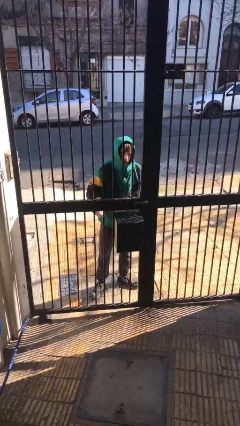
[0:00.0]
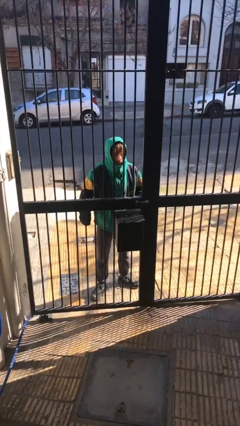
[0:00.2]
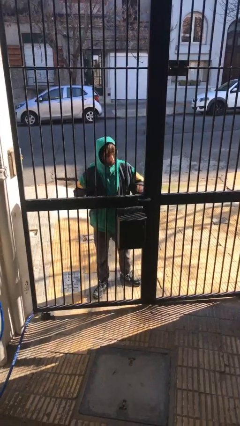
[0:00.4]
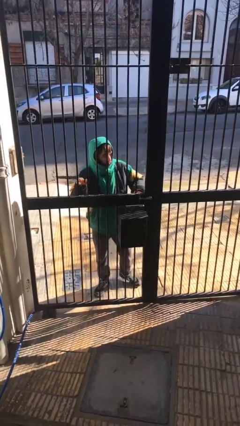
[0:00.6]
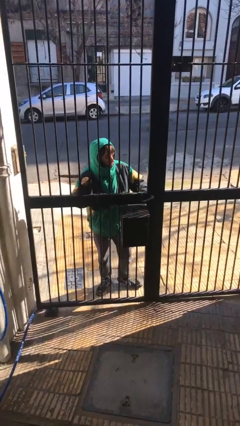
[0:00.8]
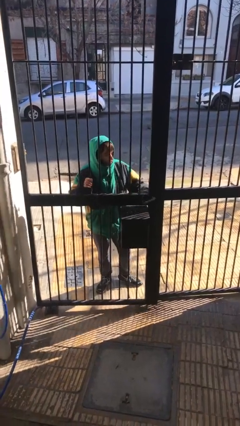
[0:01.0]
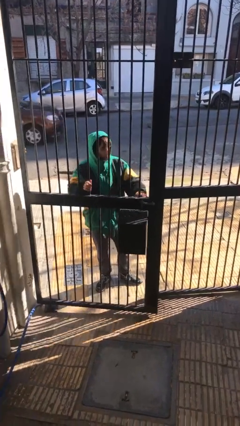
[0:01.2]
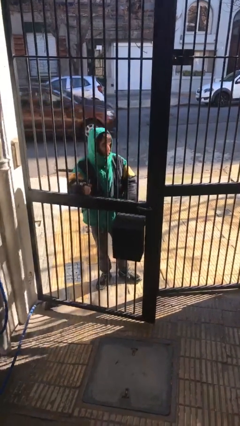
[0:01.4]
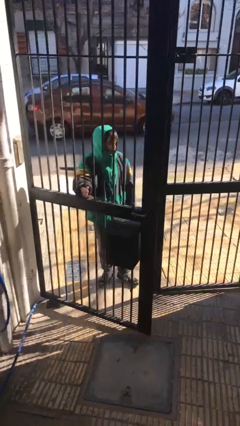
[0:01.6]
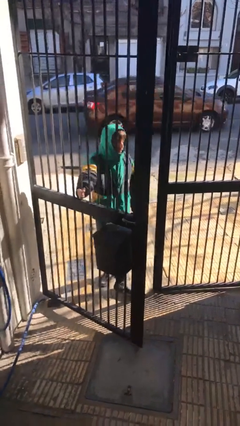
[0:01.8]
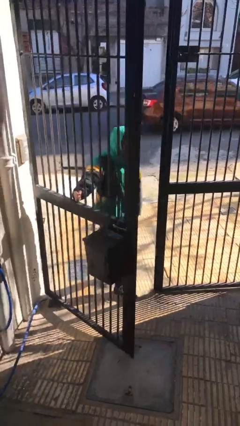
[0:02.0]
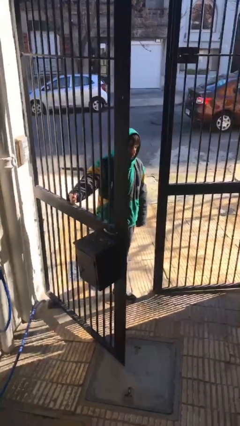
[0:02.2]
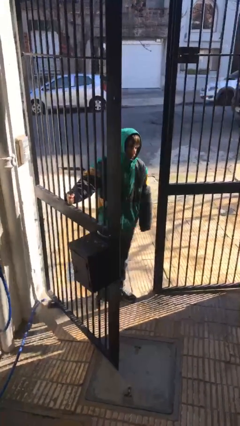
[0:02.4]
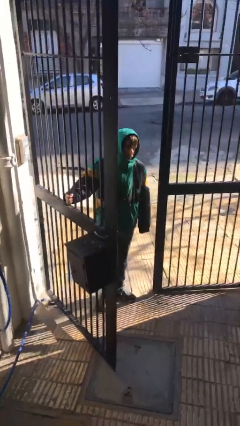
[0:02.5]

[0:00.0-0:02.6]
person opens gate

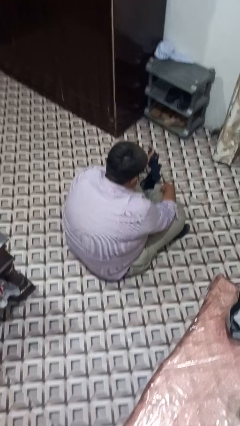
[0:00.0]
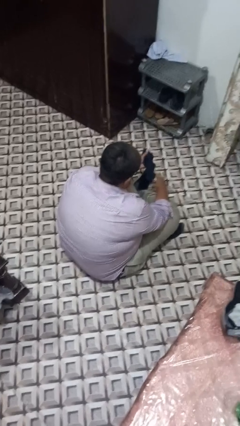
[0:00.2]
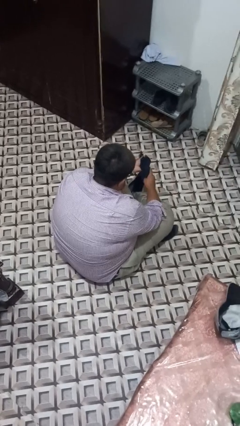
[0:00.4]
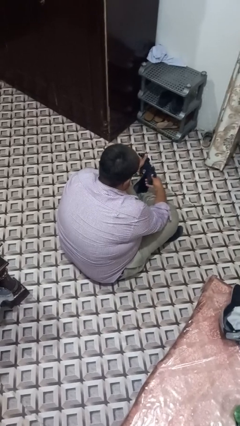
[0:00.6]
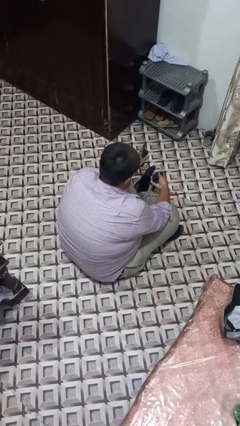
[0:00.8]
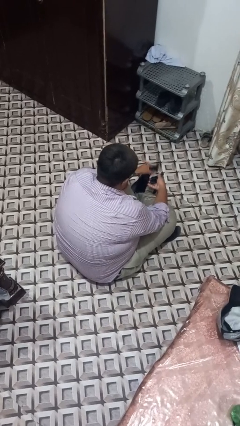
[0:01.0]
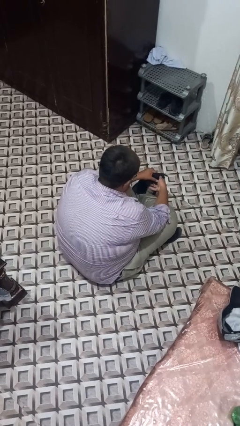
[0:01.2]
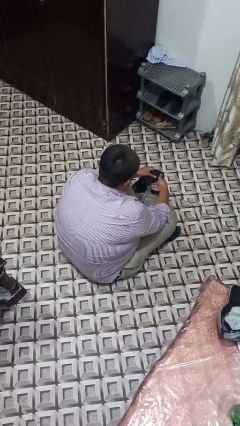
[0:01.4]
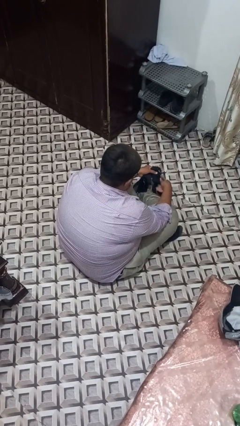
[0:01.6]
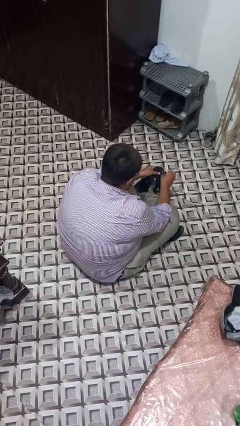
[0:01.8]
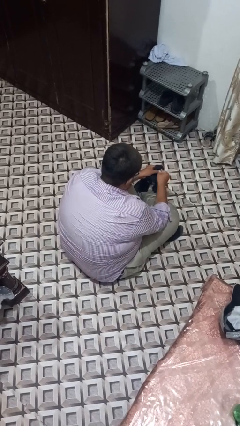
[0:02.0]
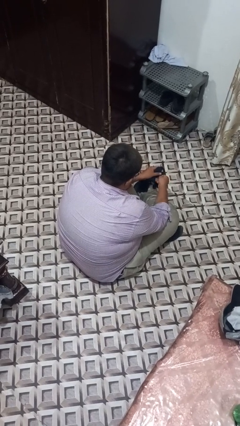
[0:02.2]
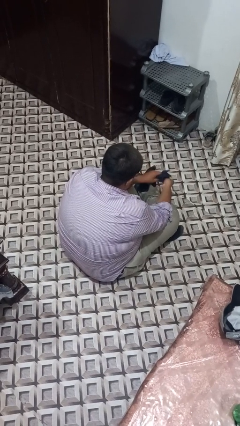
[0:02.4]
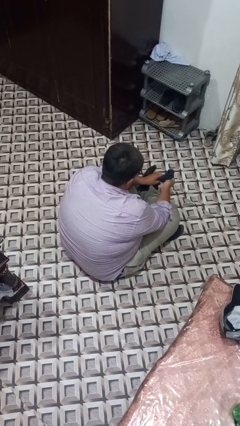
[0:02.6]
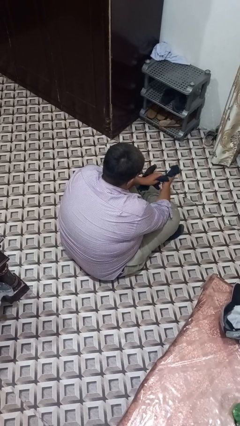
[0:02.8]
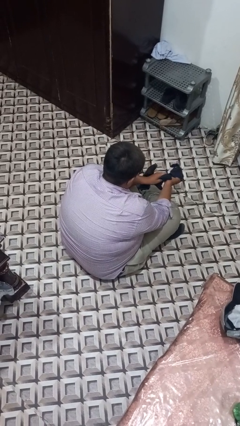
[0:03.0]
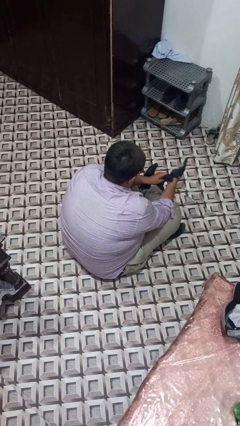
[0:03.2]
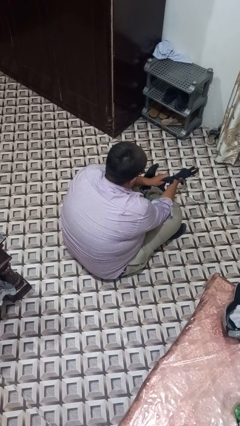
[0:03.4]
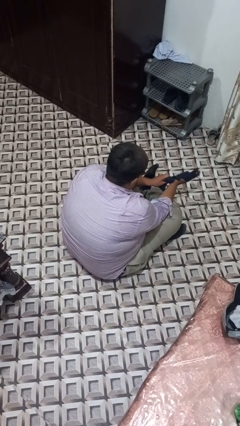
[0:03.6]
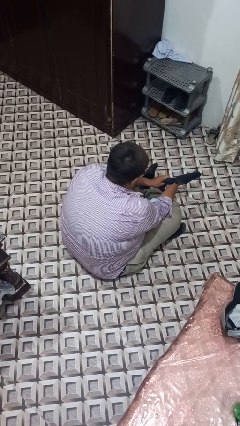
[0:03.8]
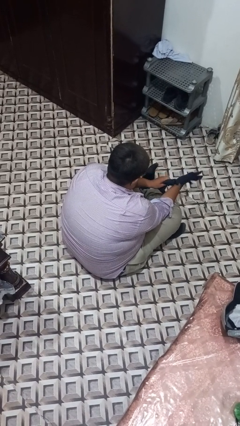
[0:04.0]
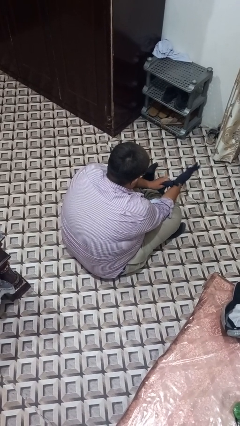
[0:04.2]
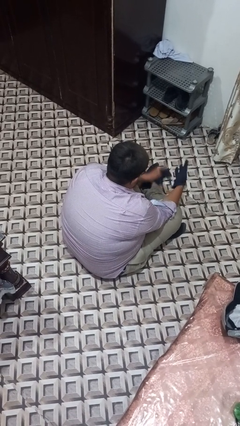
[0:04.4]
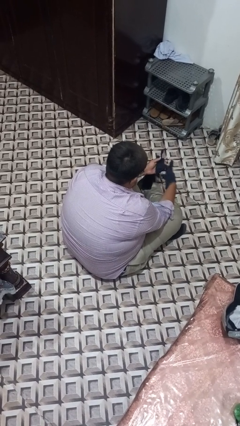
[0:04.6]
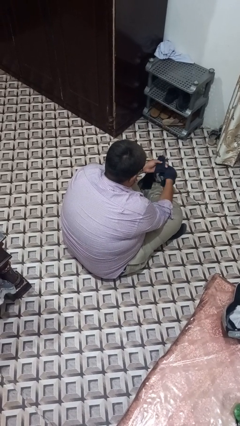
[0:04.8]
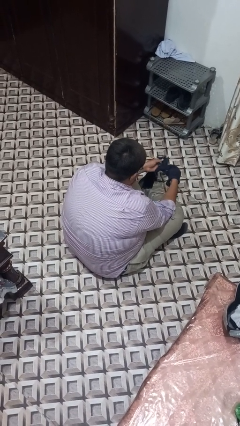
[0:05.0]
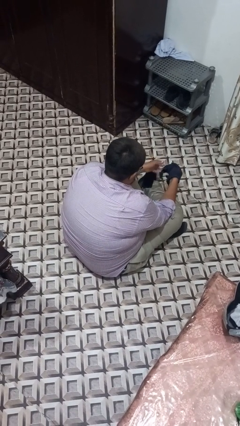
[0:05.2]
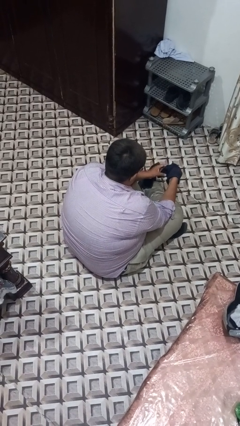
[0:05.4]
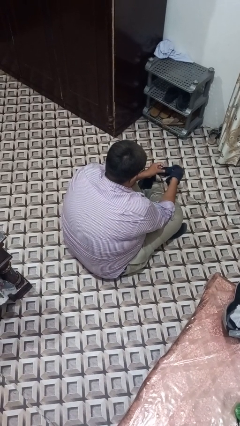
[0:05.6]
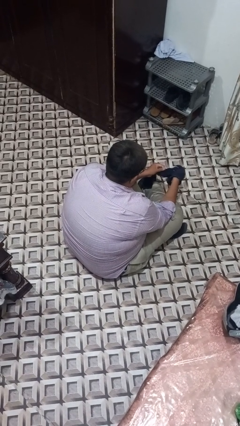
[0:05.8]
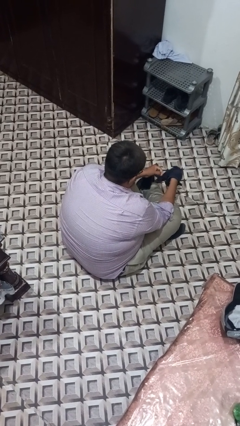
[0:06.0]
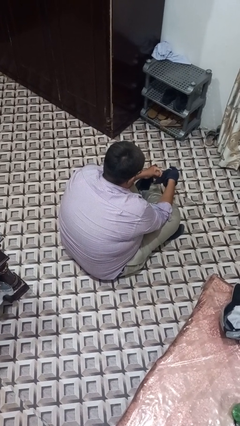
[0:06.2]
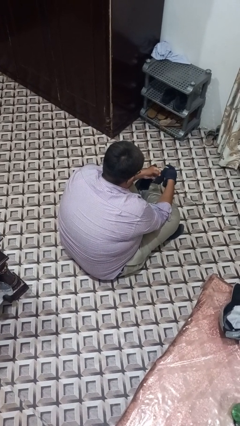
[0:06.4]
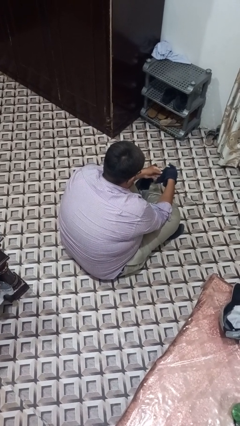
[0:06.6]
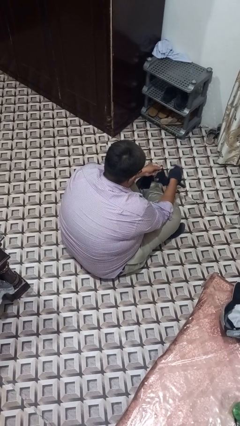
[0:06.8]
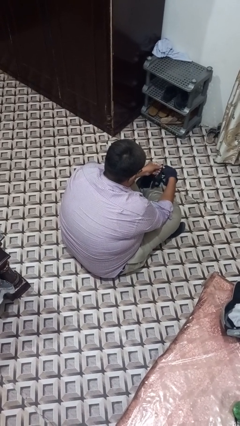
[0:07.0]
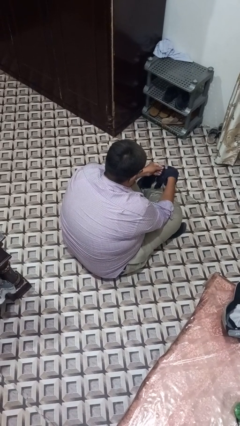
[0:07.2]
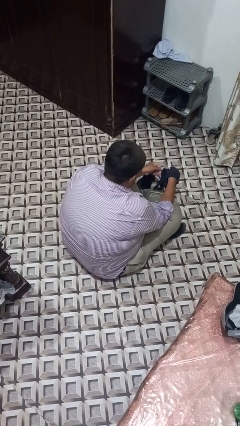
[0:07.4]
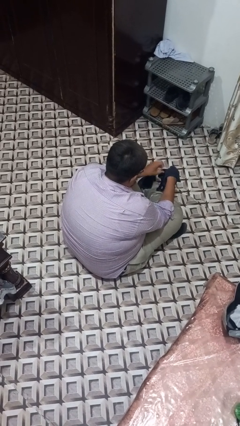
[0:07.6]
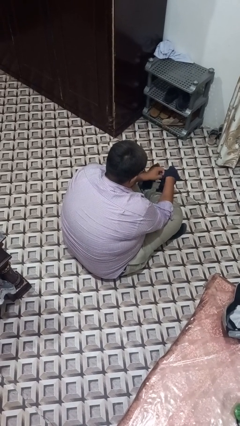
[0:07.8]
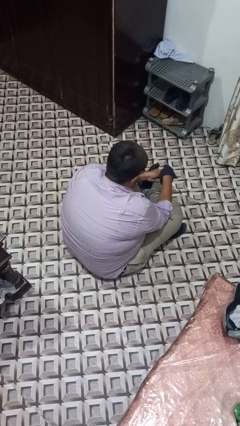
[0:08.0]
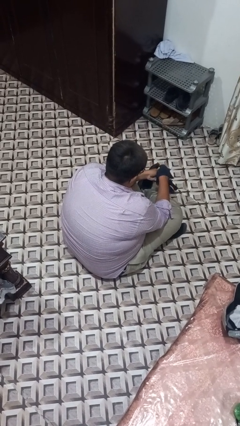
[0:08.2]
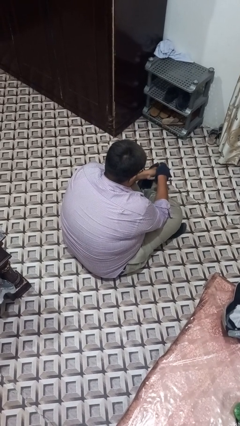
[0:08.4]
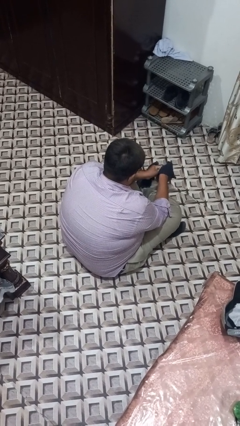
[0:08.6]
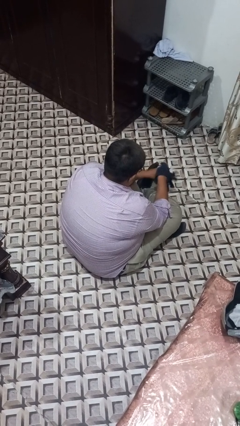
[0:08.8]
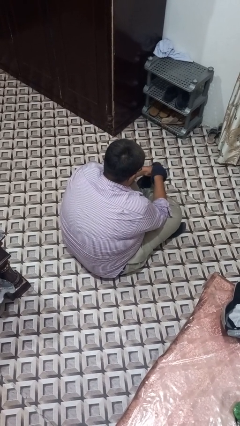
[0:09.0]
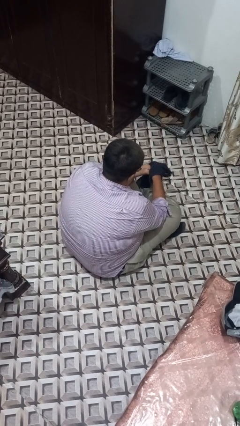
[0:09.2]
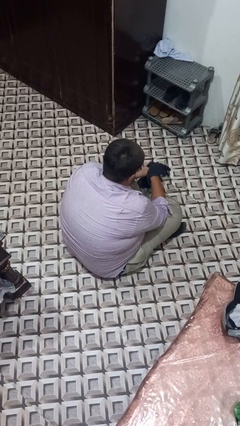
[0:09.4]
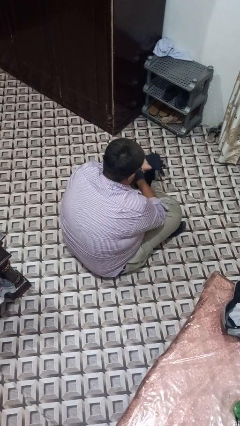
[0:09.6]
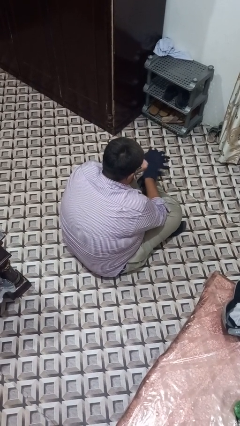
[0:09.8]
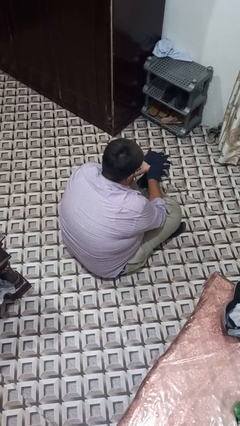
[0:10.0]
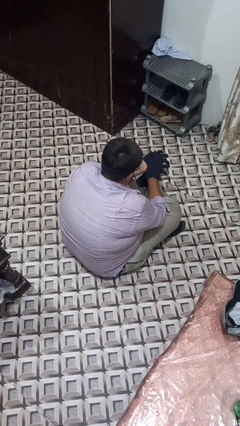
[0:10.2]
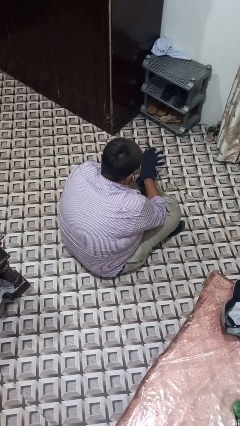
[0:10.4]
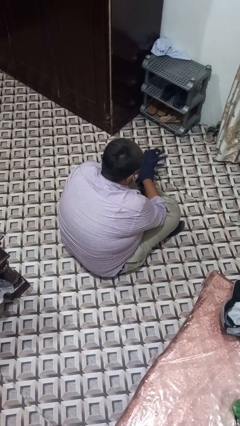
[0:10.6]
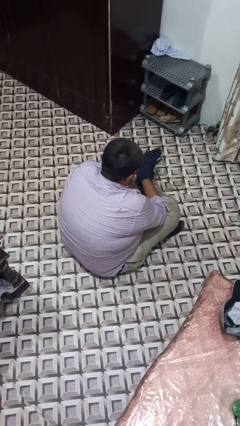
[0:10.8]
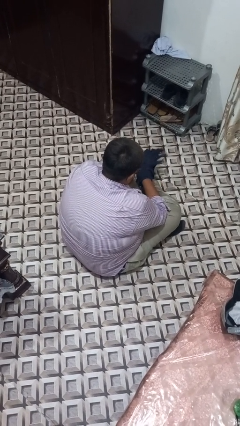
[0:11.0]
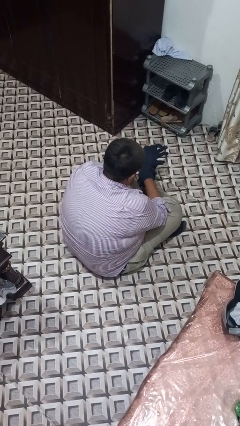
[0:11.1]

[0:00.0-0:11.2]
person puts on gloves

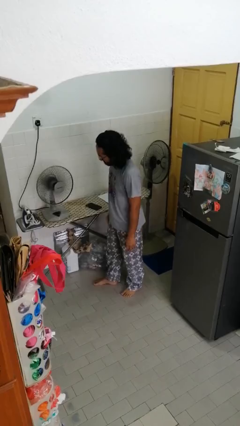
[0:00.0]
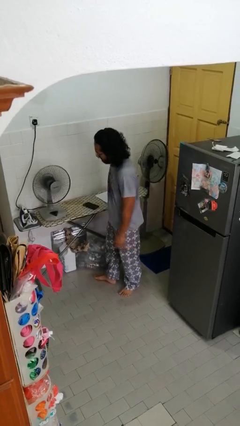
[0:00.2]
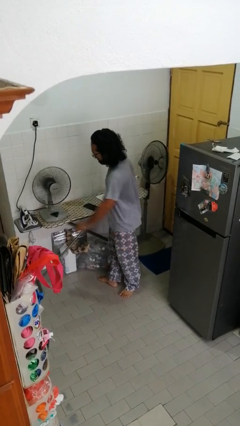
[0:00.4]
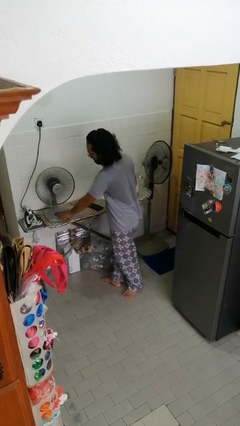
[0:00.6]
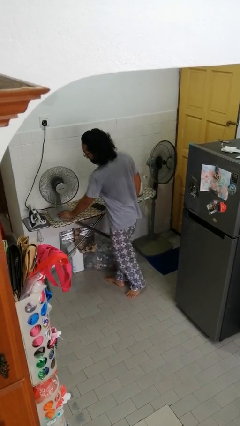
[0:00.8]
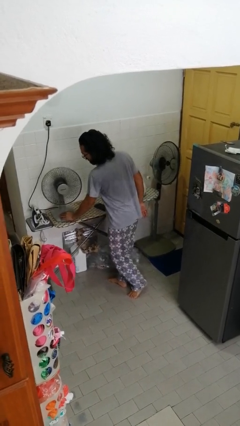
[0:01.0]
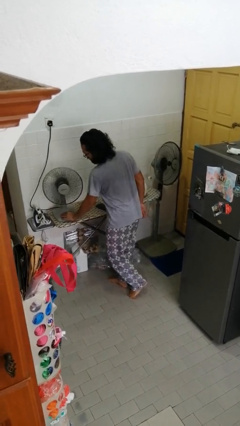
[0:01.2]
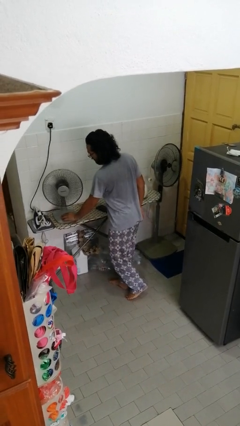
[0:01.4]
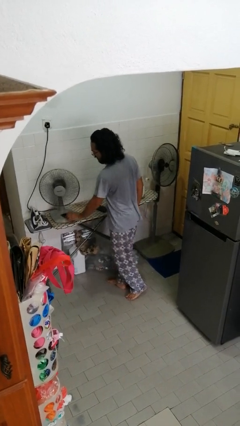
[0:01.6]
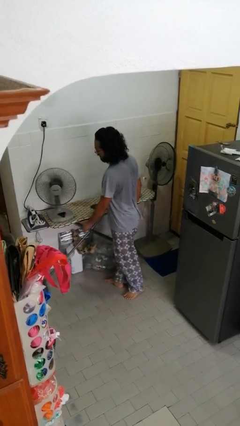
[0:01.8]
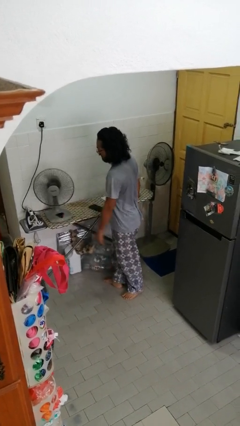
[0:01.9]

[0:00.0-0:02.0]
person turns off fan

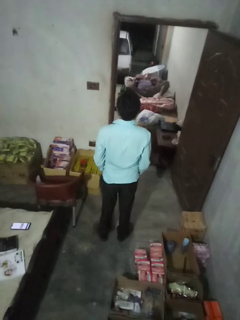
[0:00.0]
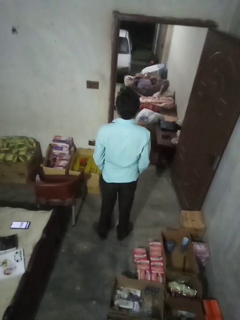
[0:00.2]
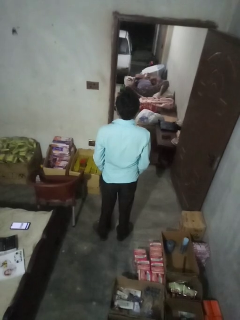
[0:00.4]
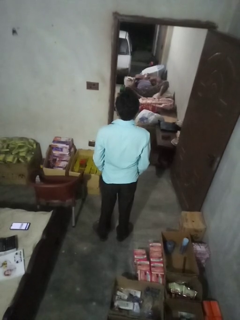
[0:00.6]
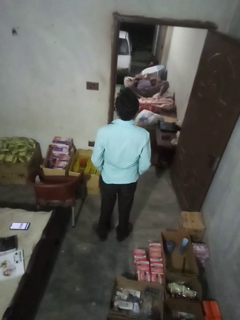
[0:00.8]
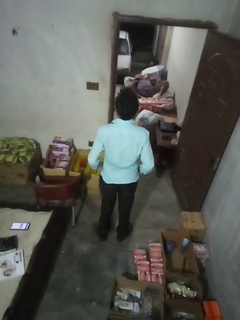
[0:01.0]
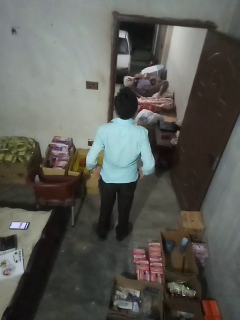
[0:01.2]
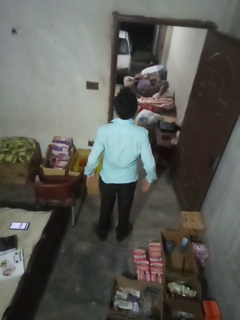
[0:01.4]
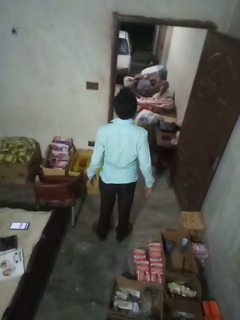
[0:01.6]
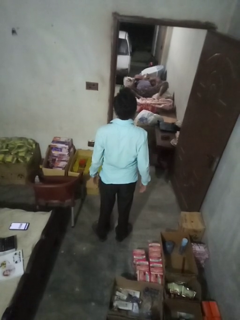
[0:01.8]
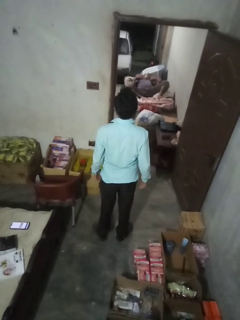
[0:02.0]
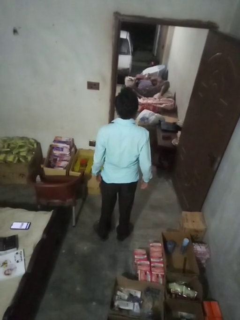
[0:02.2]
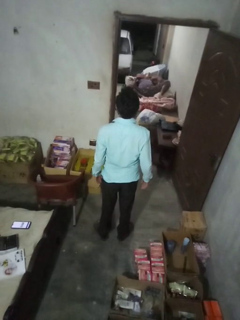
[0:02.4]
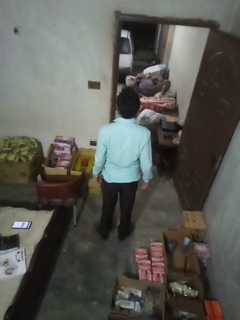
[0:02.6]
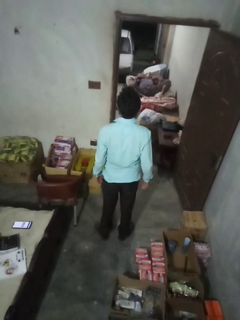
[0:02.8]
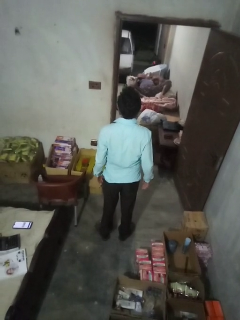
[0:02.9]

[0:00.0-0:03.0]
person puts hands in back pockets
